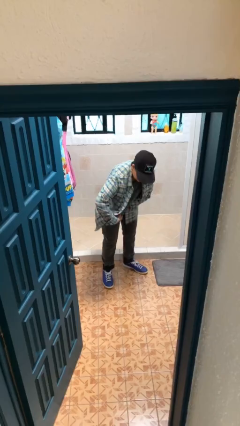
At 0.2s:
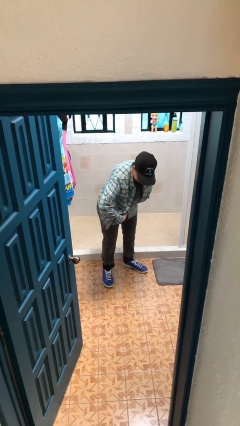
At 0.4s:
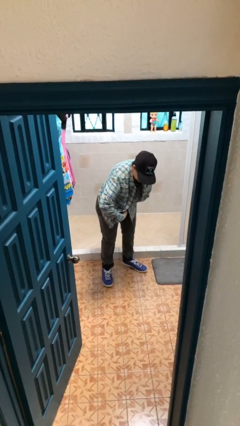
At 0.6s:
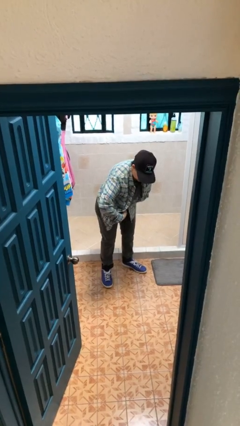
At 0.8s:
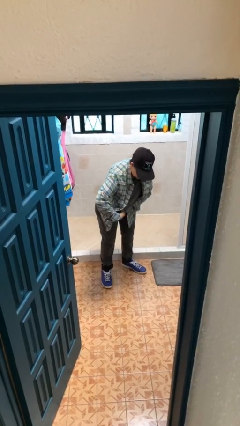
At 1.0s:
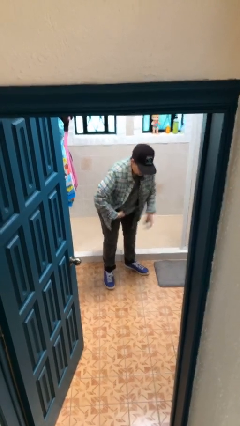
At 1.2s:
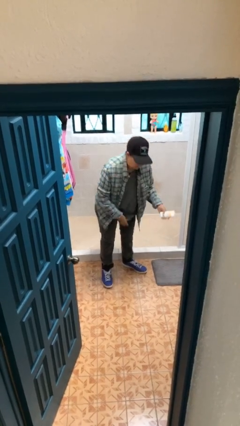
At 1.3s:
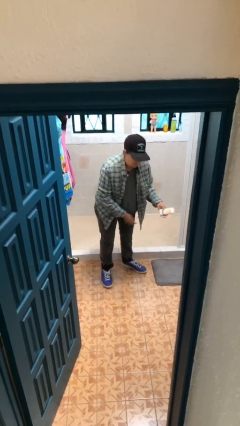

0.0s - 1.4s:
person applies deodorant

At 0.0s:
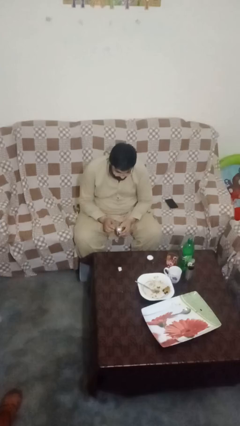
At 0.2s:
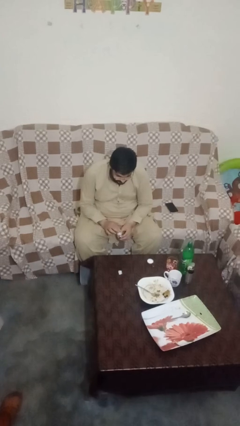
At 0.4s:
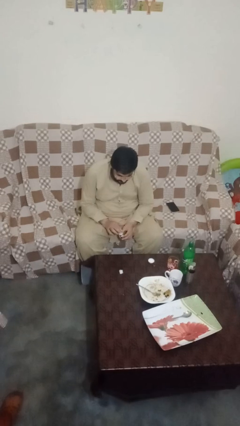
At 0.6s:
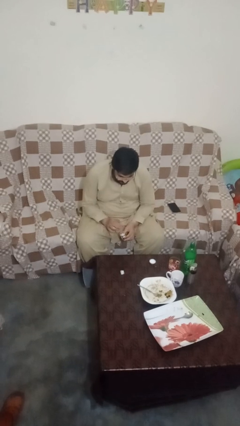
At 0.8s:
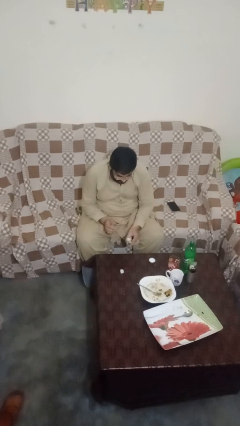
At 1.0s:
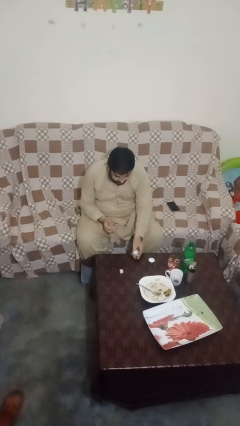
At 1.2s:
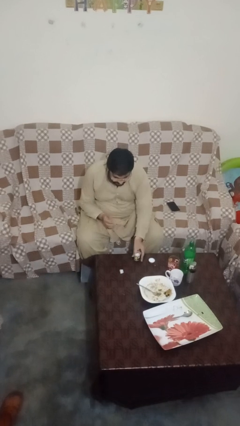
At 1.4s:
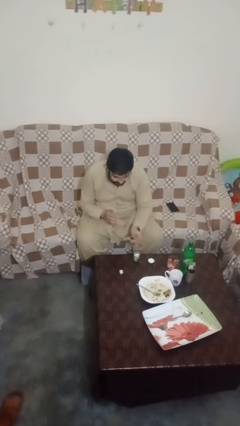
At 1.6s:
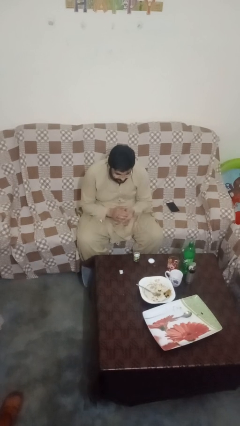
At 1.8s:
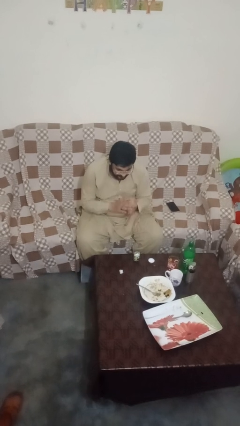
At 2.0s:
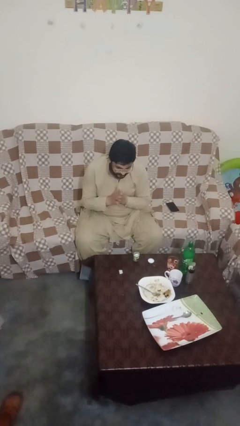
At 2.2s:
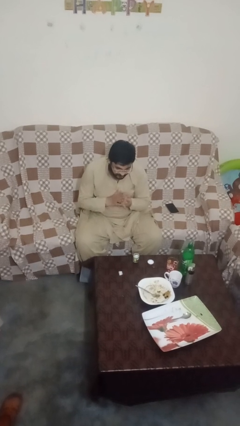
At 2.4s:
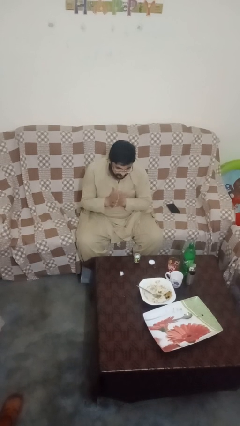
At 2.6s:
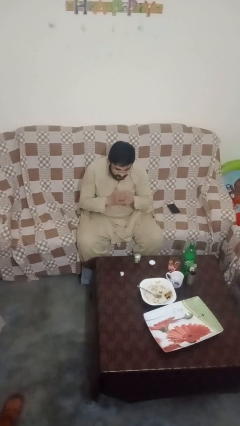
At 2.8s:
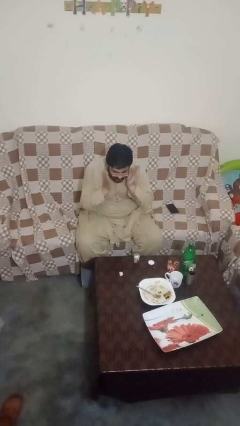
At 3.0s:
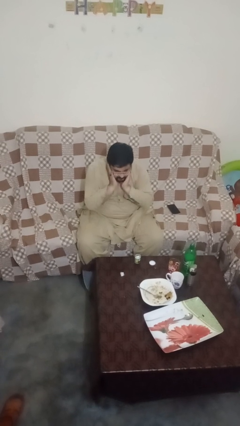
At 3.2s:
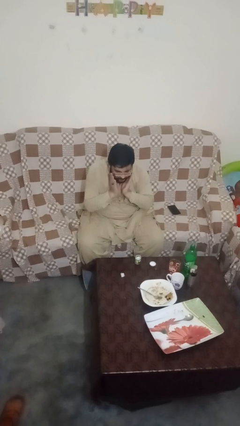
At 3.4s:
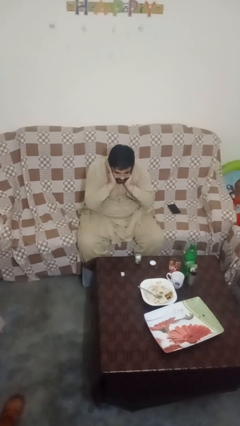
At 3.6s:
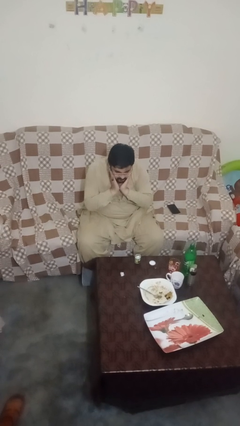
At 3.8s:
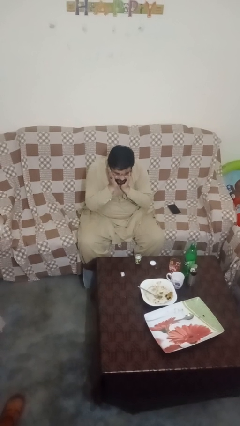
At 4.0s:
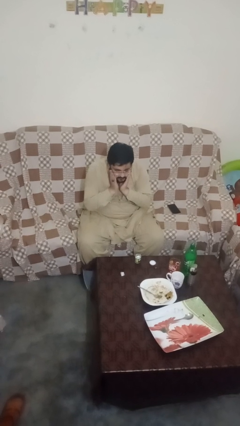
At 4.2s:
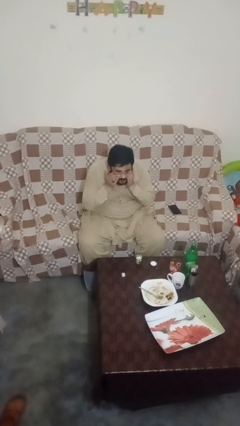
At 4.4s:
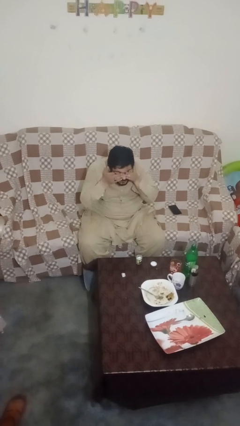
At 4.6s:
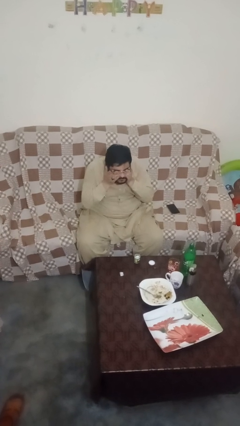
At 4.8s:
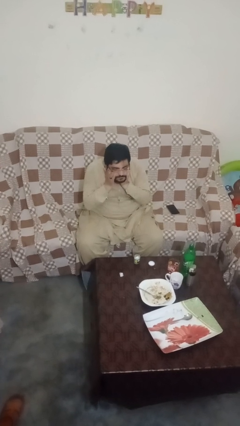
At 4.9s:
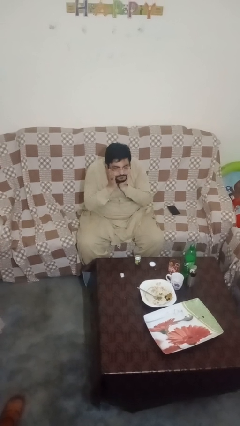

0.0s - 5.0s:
person applies facial moisturizer

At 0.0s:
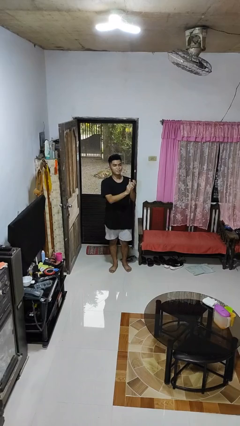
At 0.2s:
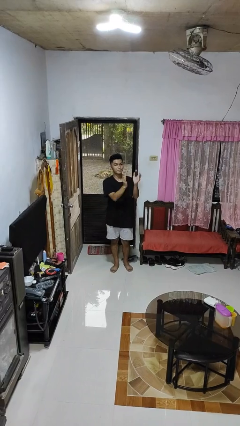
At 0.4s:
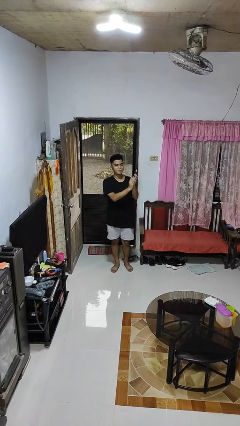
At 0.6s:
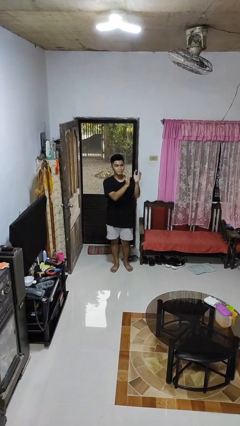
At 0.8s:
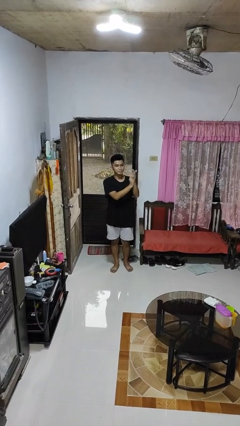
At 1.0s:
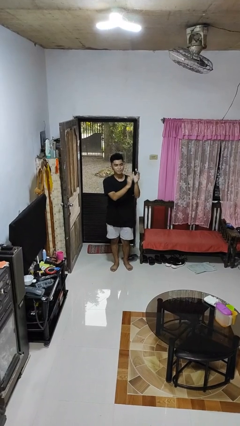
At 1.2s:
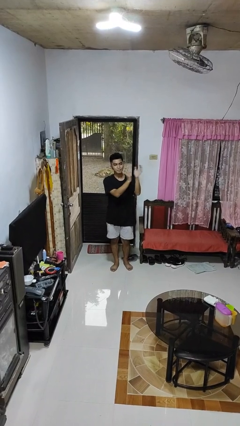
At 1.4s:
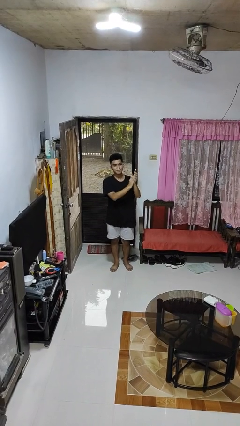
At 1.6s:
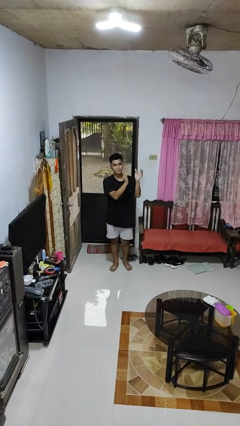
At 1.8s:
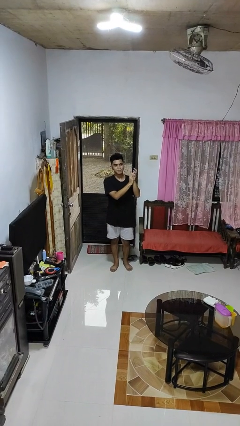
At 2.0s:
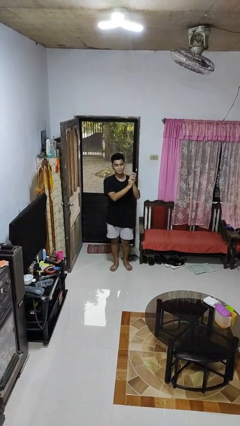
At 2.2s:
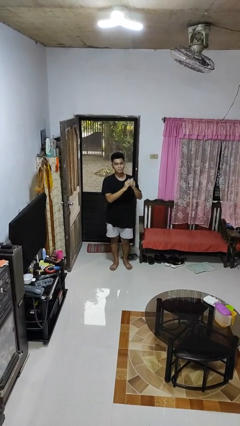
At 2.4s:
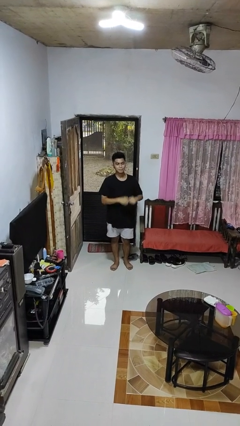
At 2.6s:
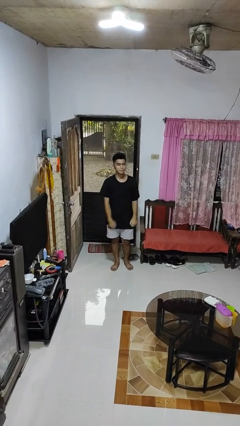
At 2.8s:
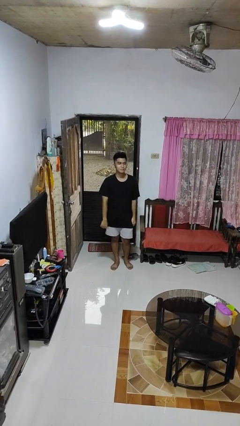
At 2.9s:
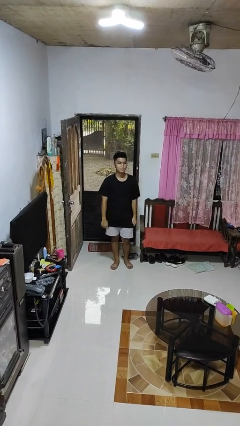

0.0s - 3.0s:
person claps hands

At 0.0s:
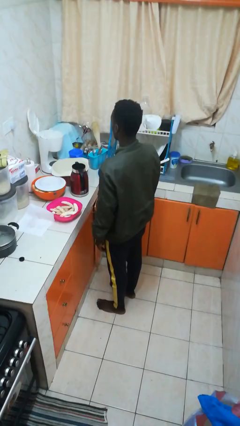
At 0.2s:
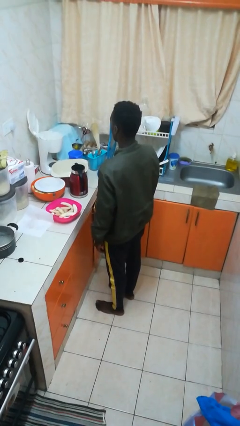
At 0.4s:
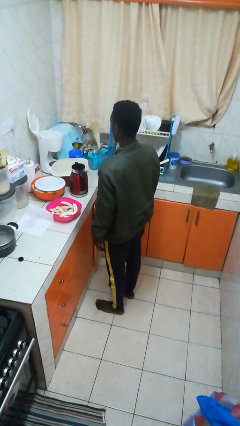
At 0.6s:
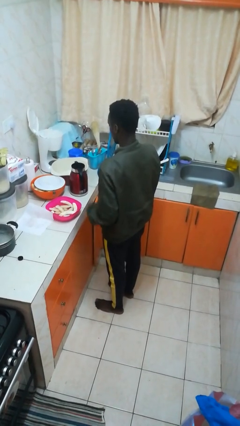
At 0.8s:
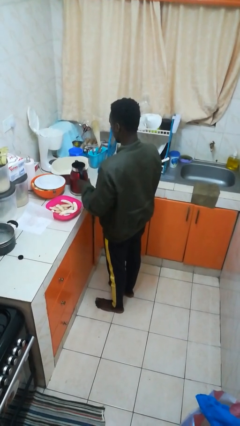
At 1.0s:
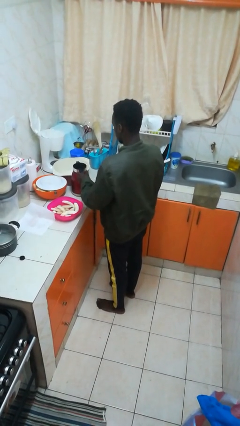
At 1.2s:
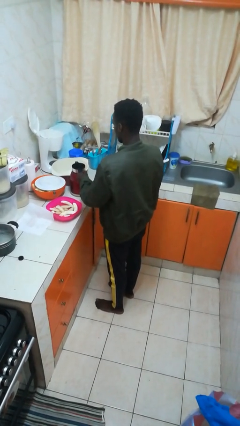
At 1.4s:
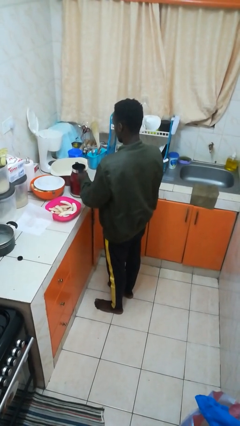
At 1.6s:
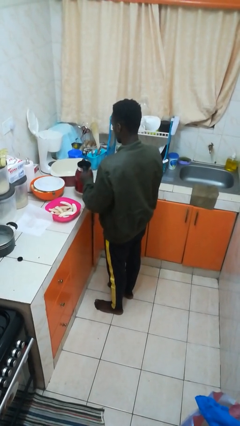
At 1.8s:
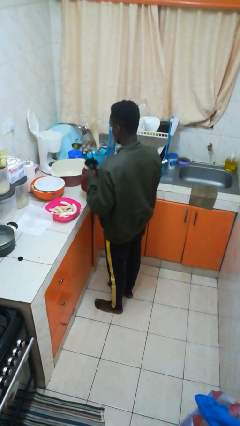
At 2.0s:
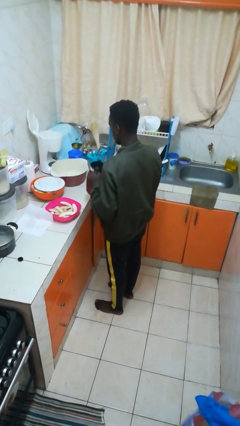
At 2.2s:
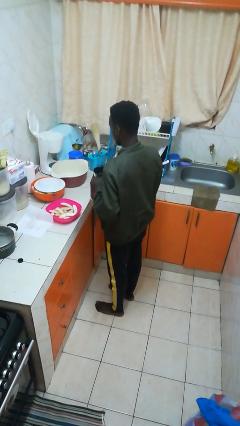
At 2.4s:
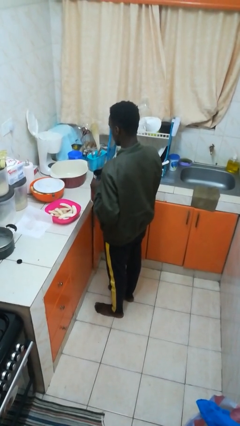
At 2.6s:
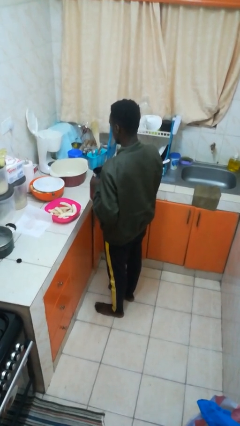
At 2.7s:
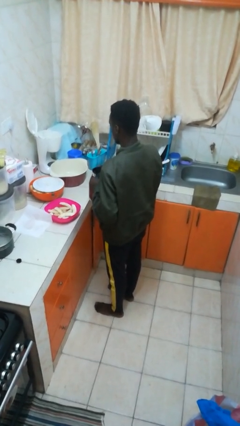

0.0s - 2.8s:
person picks up object from countertop

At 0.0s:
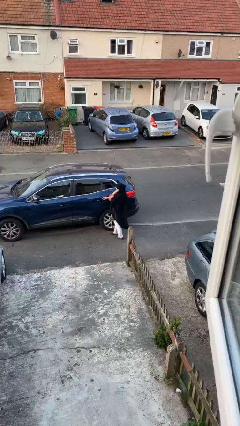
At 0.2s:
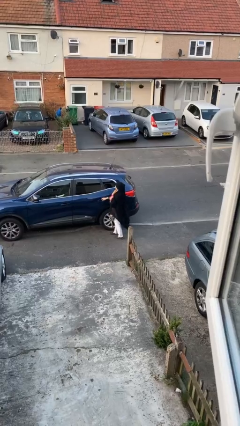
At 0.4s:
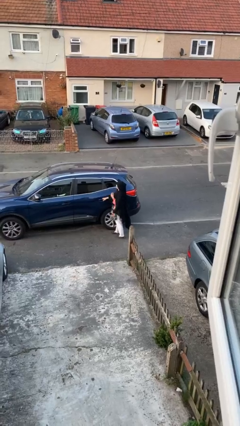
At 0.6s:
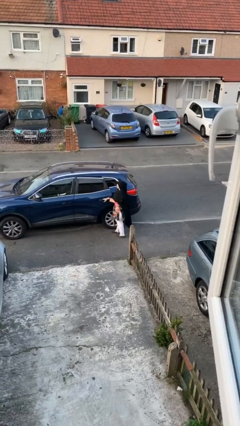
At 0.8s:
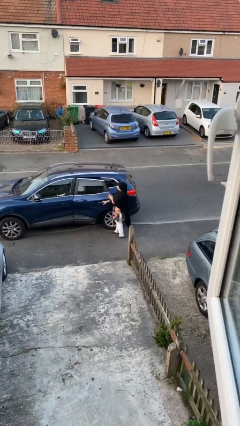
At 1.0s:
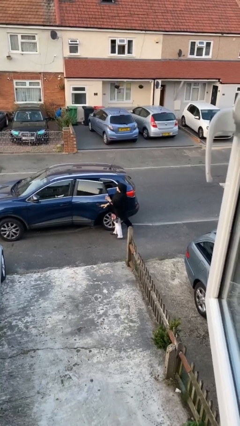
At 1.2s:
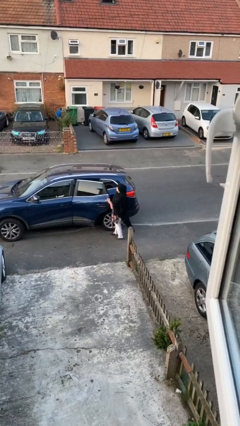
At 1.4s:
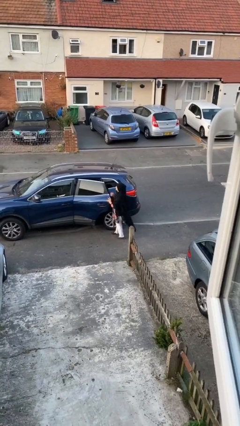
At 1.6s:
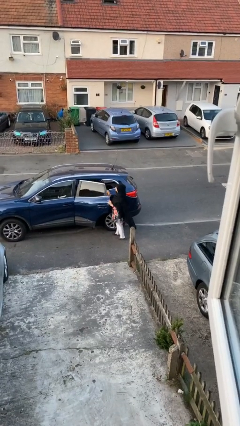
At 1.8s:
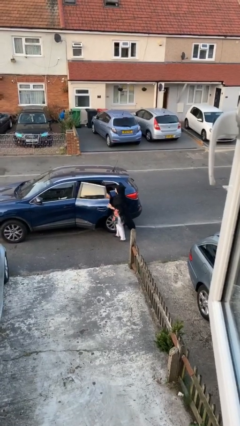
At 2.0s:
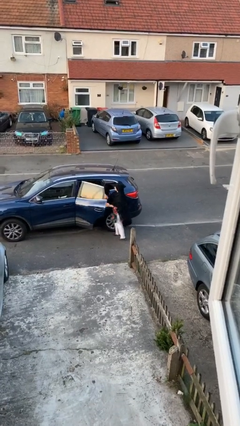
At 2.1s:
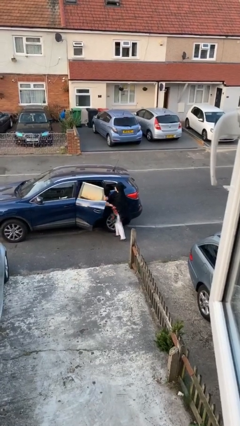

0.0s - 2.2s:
person opens car door

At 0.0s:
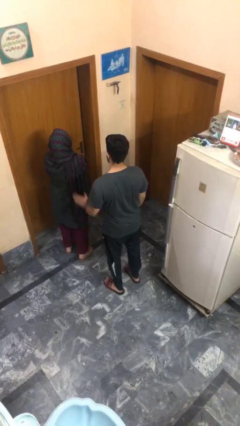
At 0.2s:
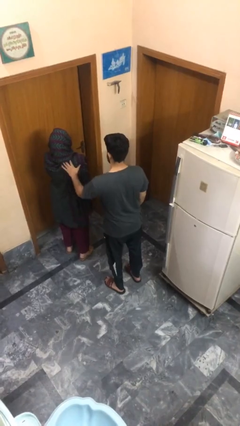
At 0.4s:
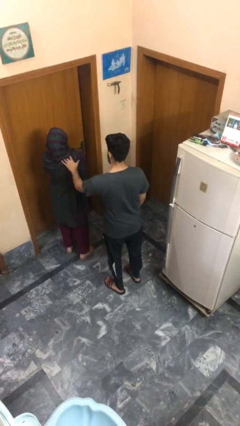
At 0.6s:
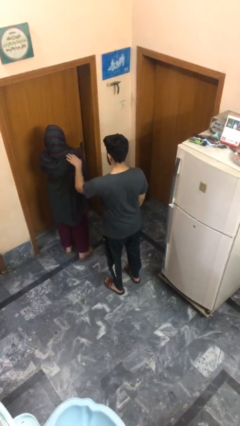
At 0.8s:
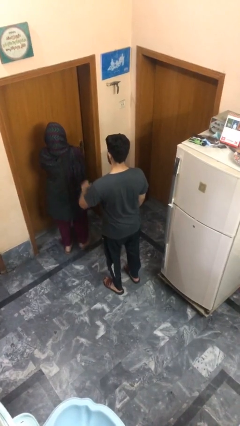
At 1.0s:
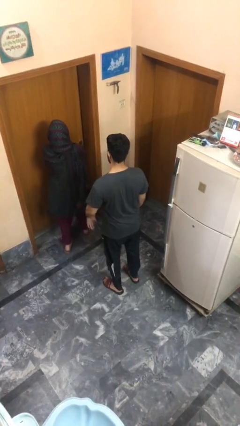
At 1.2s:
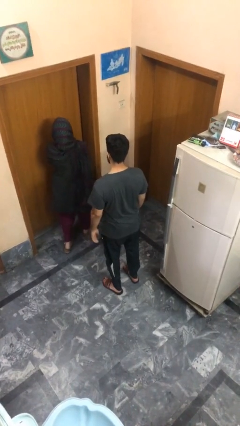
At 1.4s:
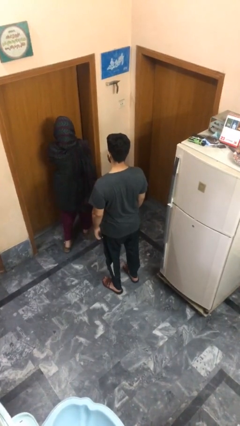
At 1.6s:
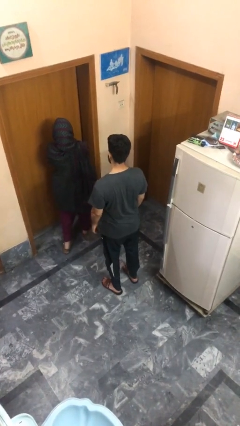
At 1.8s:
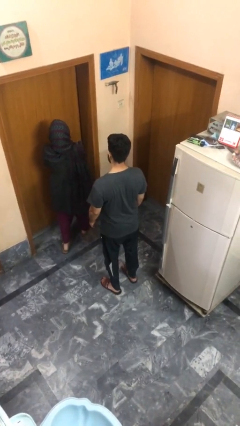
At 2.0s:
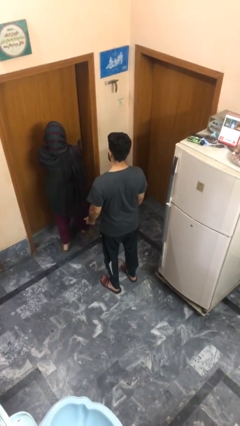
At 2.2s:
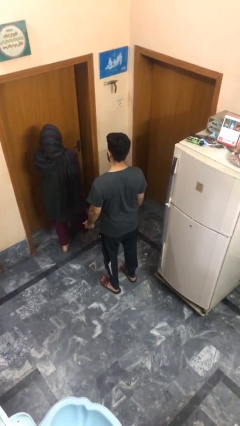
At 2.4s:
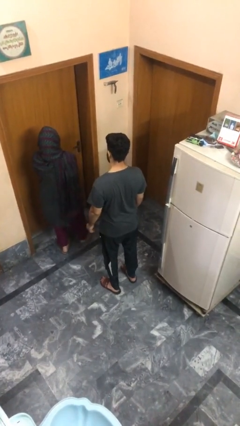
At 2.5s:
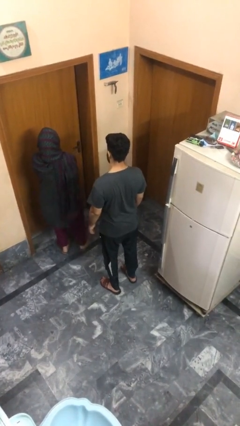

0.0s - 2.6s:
person shoves person

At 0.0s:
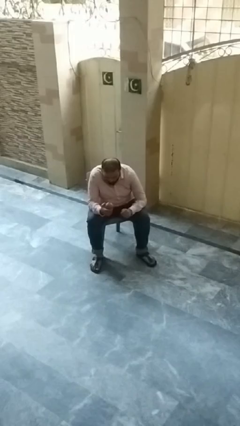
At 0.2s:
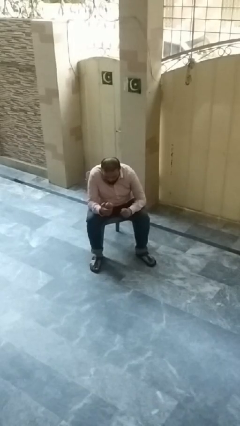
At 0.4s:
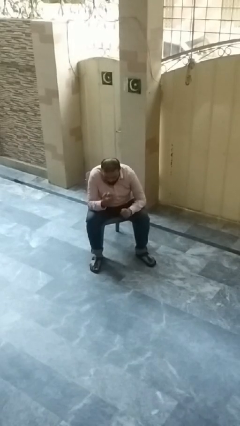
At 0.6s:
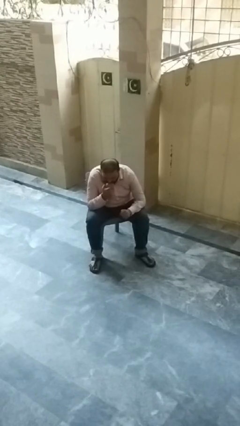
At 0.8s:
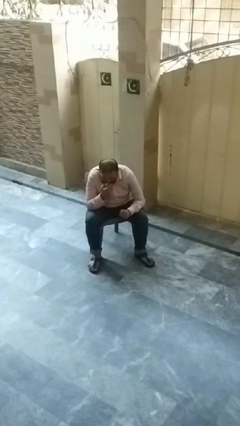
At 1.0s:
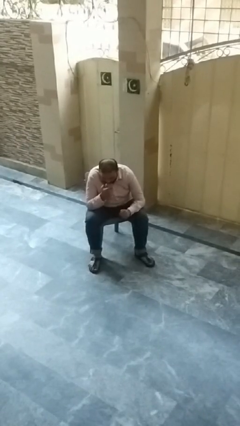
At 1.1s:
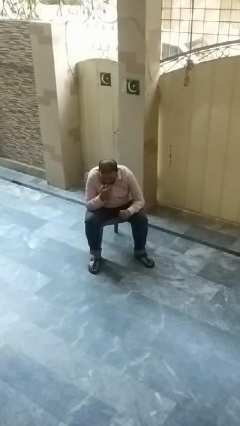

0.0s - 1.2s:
person eats apple
